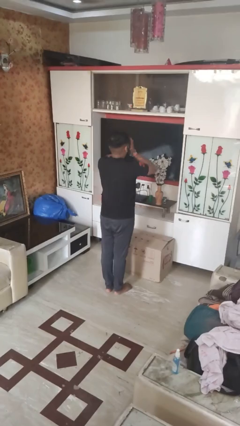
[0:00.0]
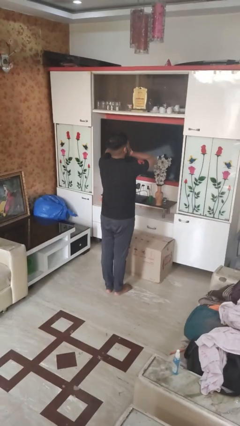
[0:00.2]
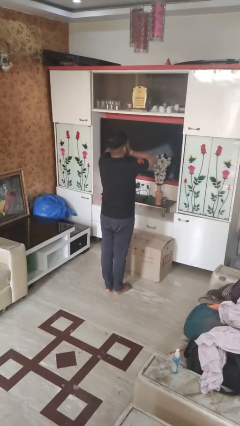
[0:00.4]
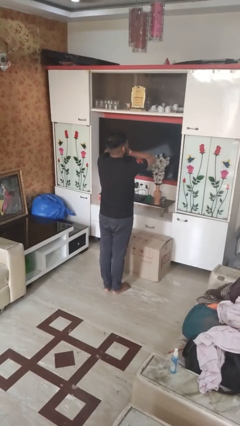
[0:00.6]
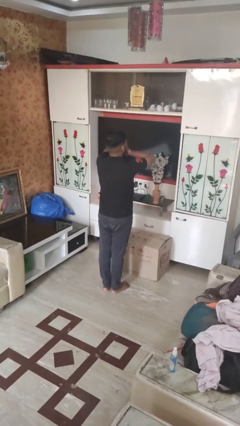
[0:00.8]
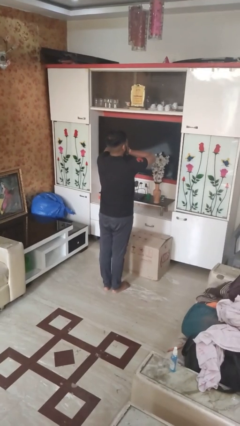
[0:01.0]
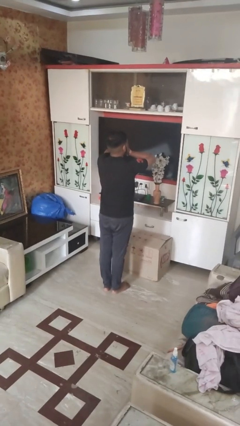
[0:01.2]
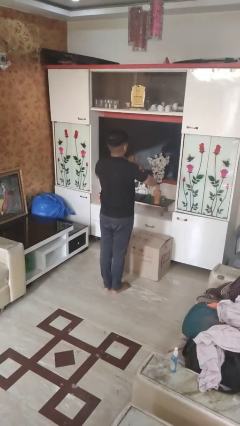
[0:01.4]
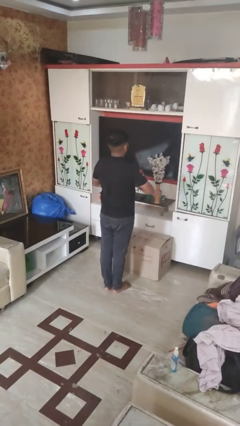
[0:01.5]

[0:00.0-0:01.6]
person covers face with hands

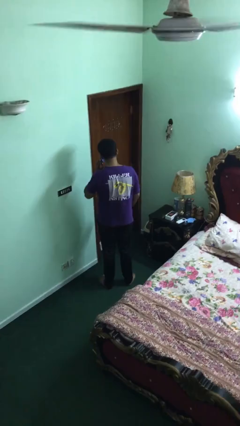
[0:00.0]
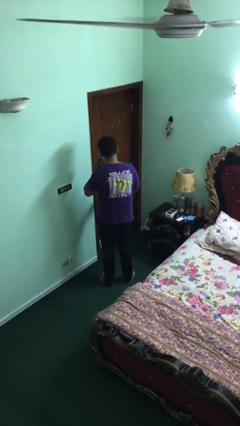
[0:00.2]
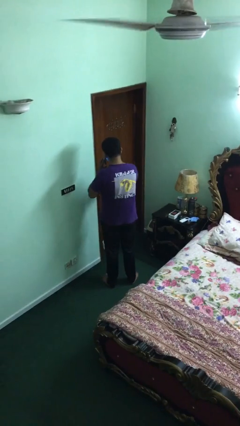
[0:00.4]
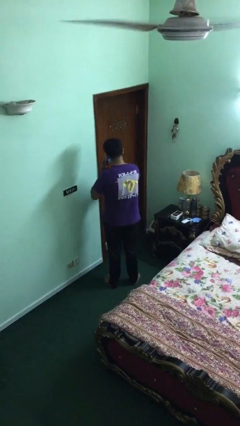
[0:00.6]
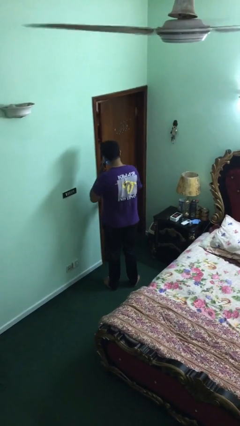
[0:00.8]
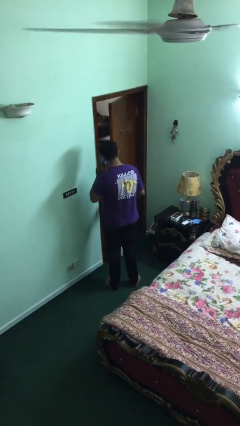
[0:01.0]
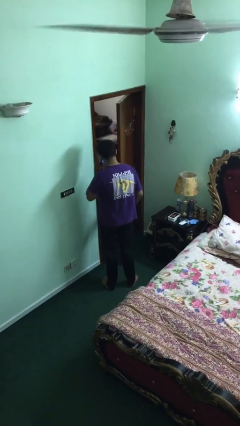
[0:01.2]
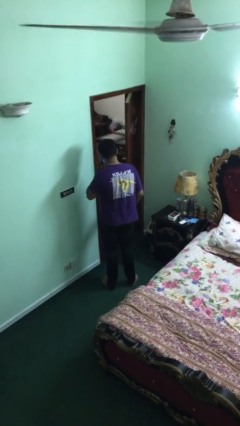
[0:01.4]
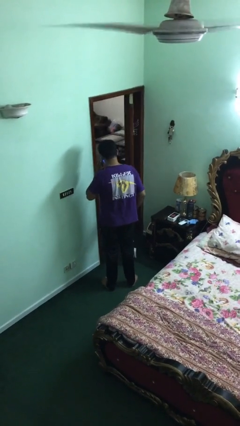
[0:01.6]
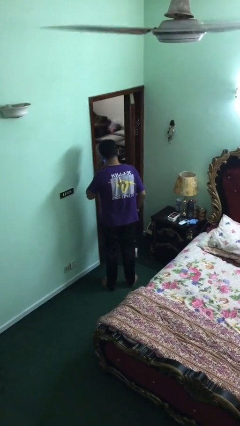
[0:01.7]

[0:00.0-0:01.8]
person opens facility door

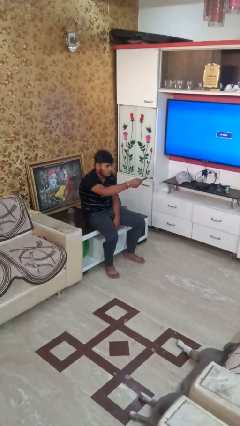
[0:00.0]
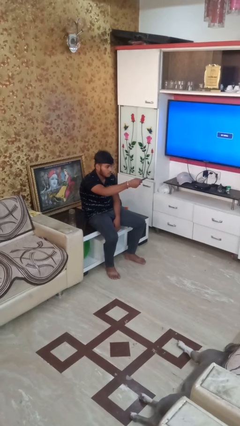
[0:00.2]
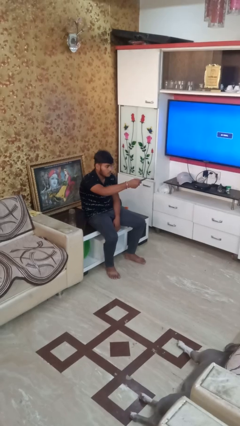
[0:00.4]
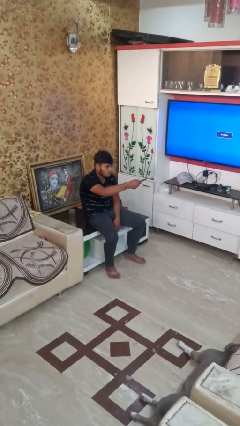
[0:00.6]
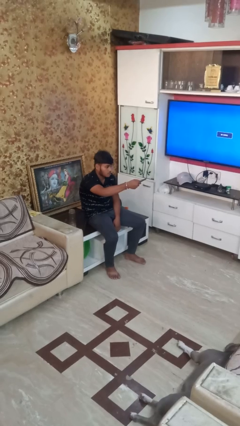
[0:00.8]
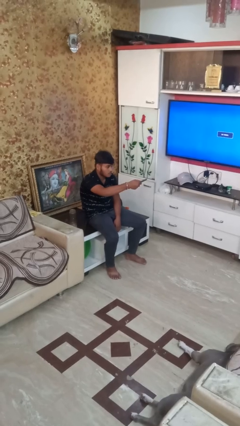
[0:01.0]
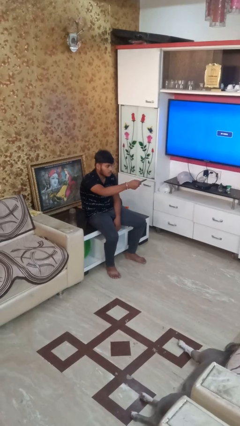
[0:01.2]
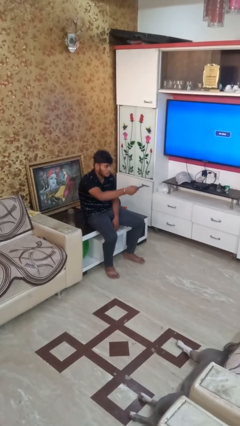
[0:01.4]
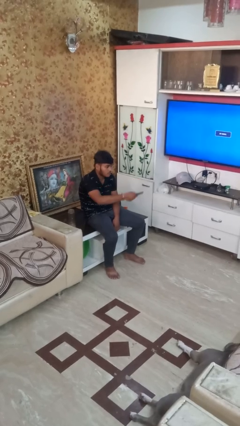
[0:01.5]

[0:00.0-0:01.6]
person uses television remote

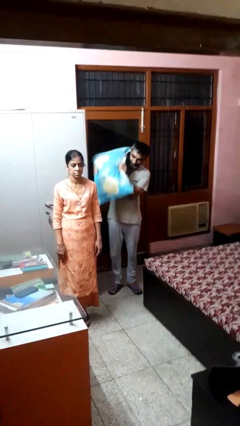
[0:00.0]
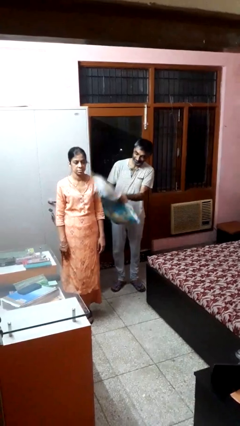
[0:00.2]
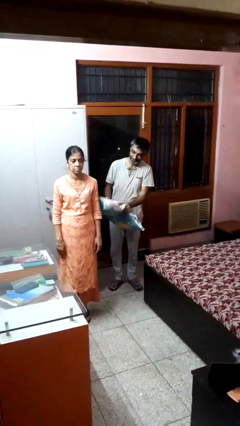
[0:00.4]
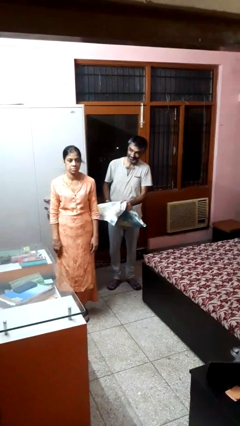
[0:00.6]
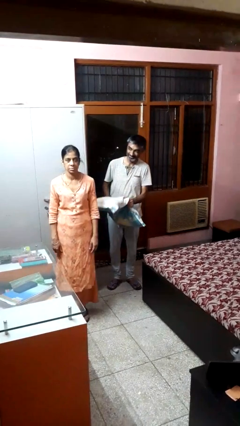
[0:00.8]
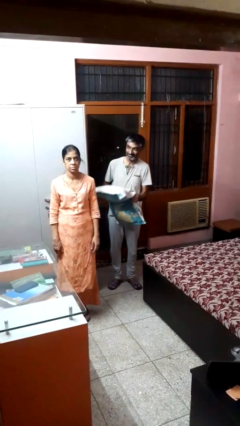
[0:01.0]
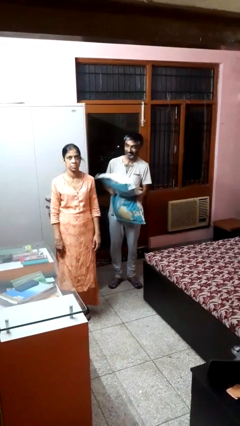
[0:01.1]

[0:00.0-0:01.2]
person hits person with pillow

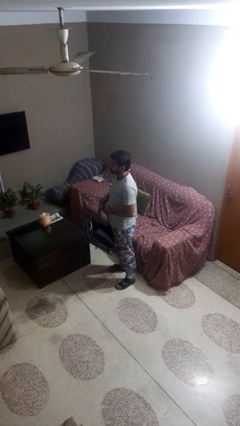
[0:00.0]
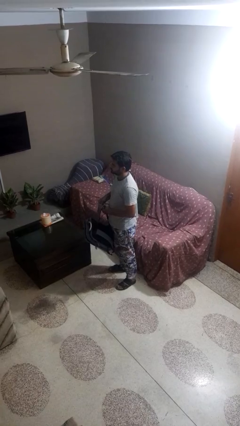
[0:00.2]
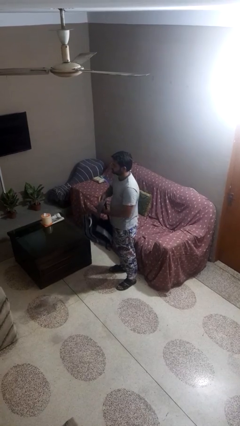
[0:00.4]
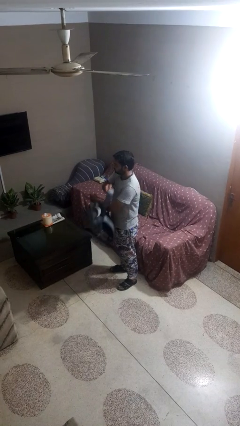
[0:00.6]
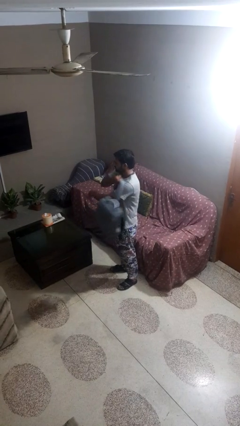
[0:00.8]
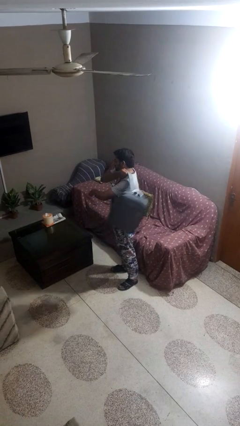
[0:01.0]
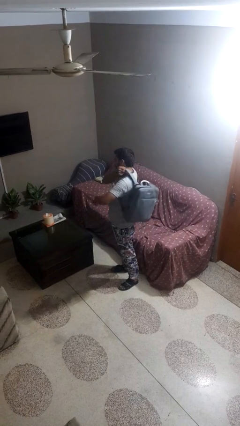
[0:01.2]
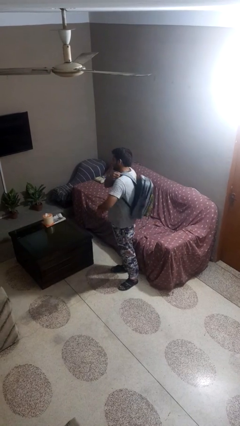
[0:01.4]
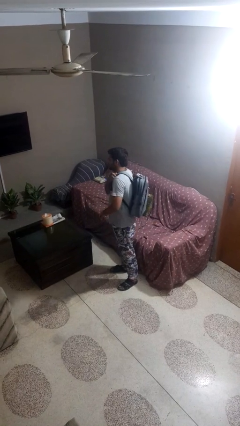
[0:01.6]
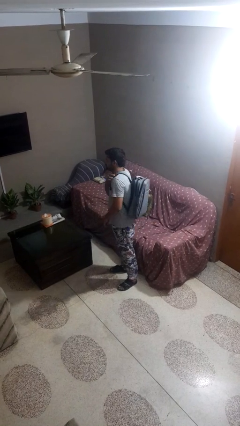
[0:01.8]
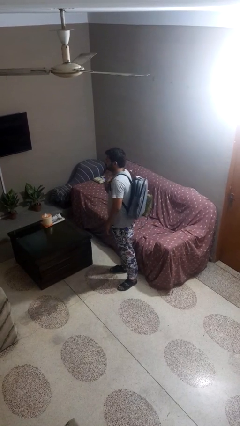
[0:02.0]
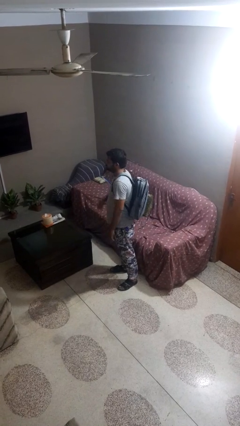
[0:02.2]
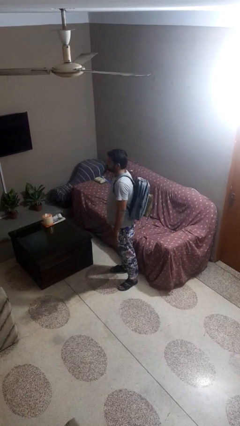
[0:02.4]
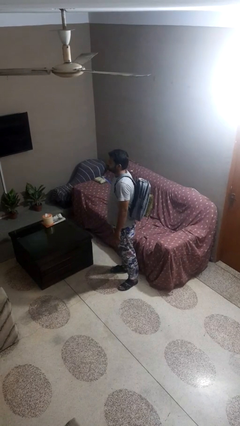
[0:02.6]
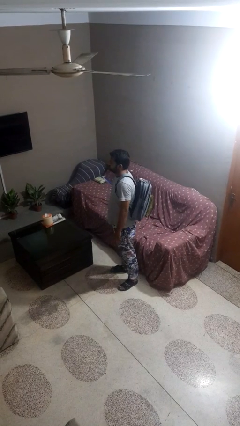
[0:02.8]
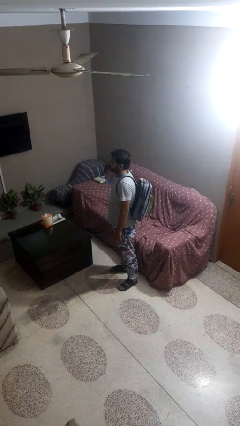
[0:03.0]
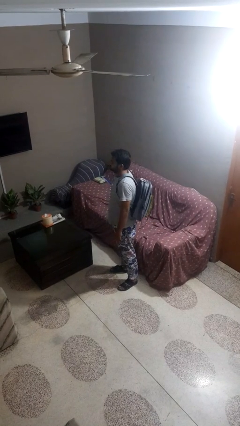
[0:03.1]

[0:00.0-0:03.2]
person puts on backpack

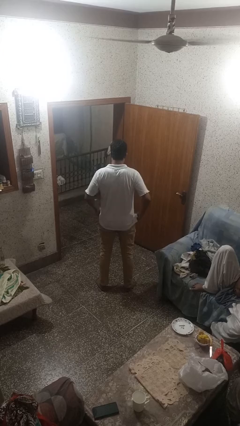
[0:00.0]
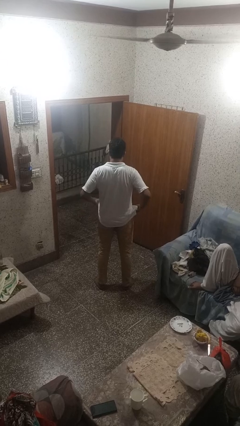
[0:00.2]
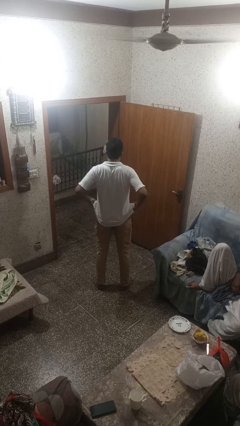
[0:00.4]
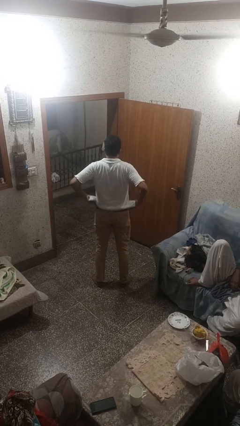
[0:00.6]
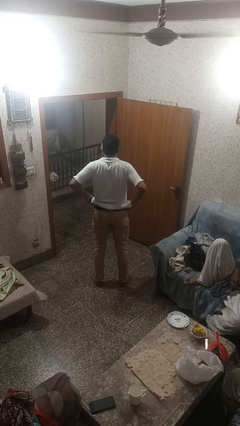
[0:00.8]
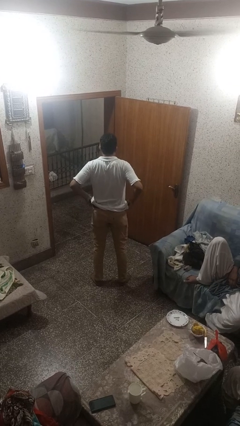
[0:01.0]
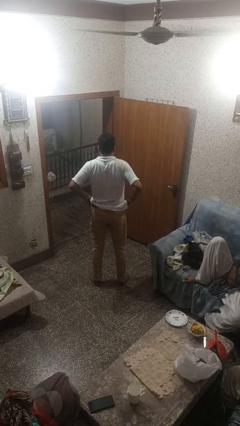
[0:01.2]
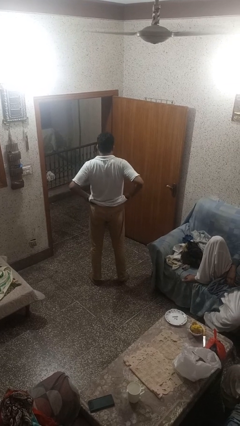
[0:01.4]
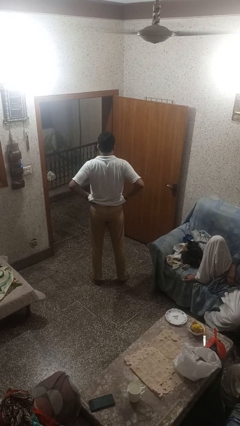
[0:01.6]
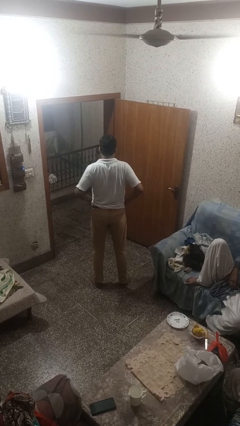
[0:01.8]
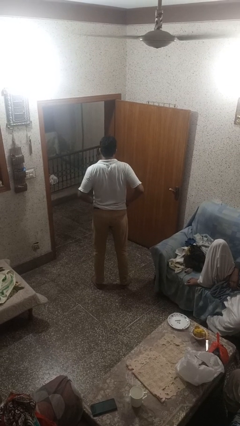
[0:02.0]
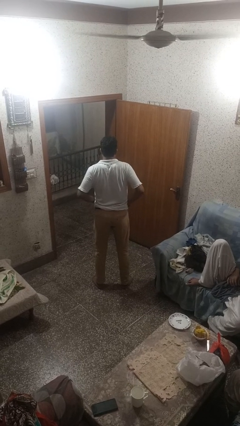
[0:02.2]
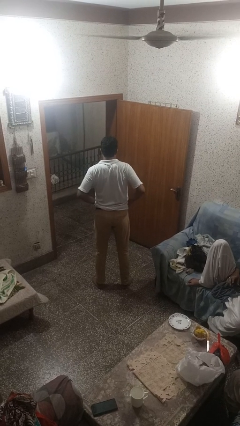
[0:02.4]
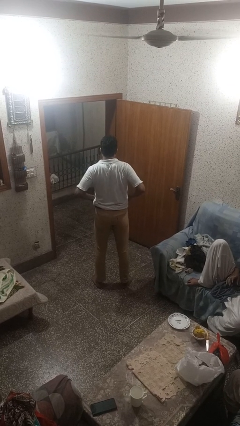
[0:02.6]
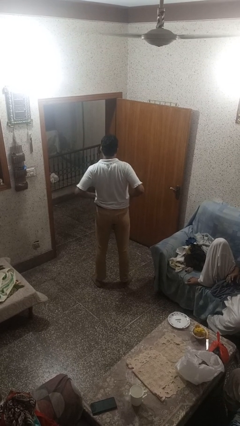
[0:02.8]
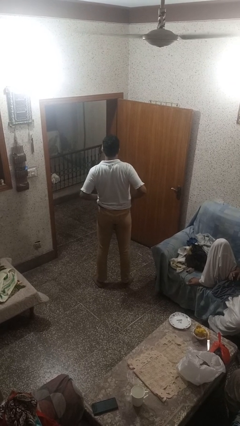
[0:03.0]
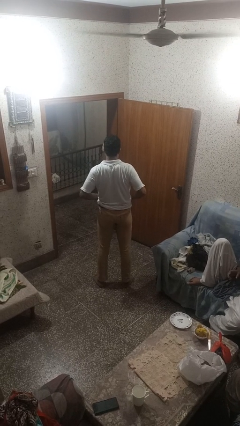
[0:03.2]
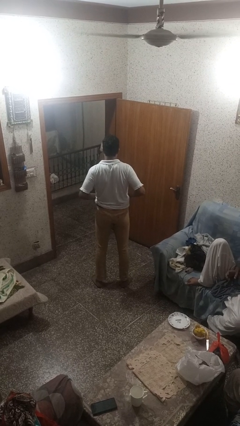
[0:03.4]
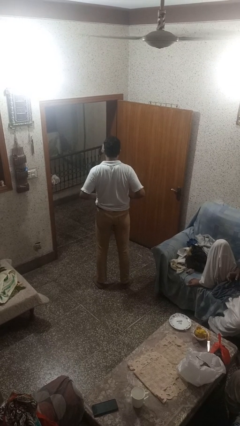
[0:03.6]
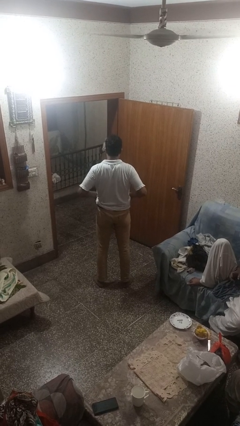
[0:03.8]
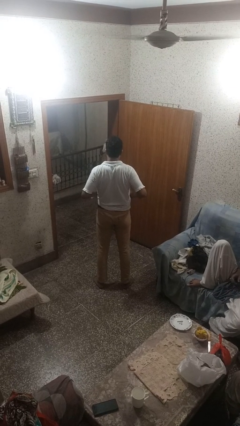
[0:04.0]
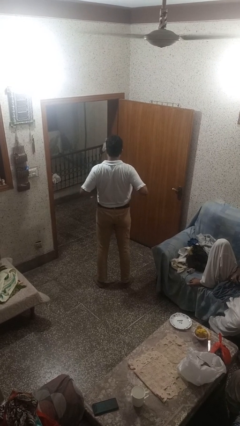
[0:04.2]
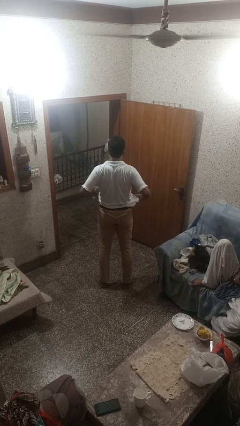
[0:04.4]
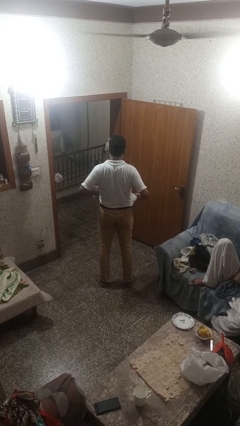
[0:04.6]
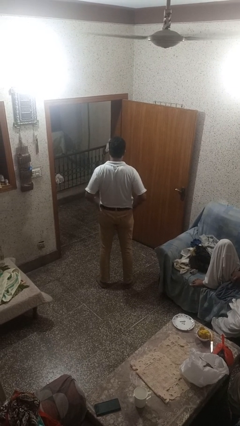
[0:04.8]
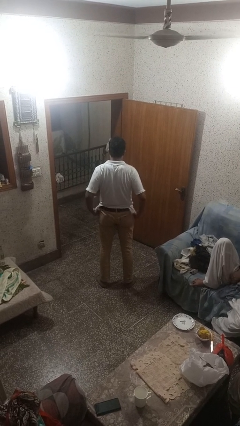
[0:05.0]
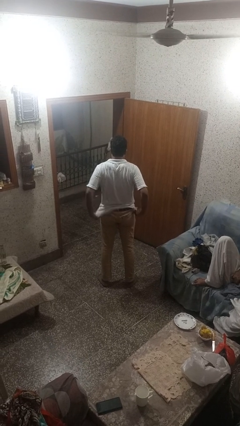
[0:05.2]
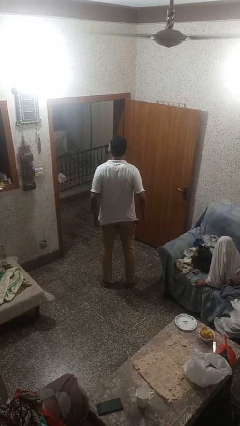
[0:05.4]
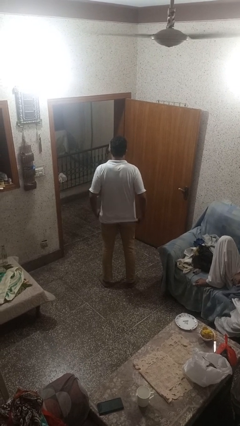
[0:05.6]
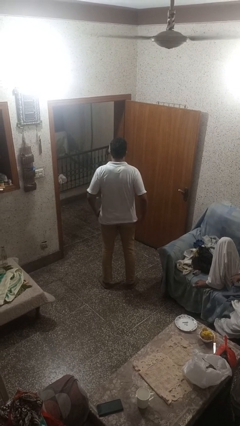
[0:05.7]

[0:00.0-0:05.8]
person hikes up pants

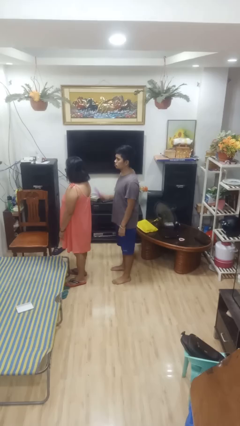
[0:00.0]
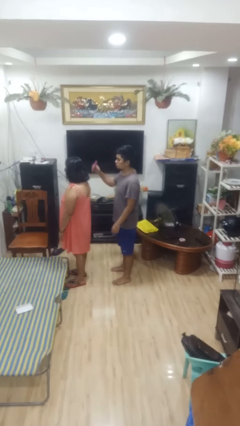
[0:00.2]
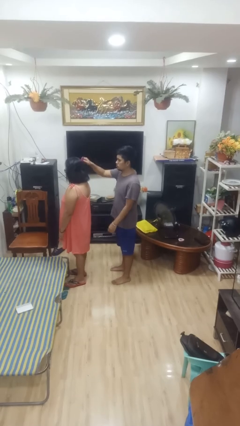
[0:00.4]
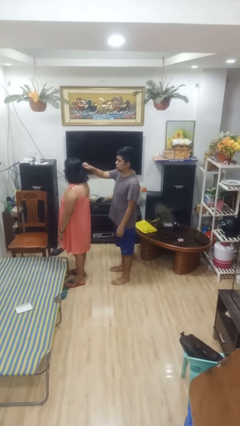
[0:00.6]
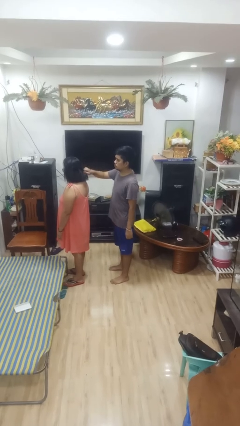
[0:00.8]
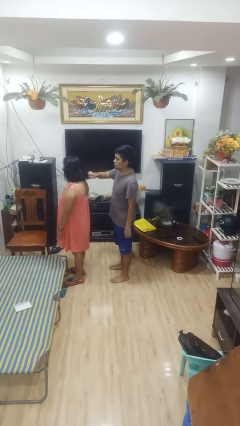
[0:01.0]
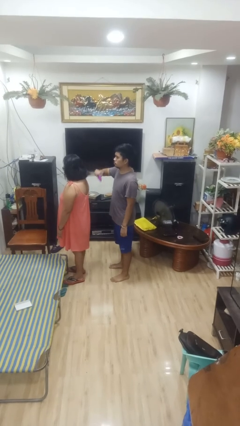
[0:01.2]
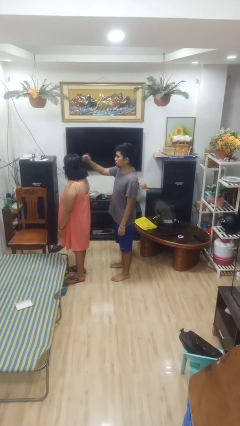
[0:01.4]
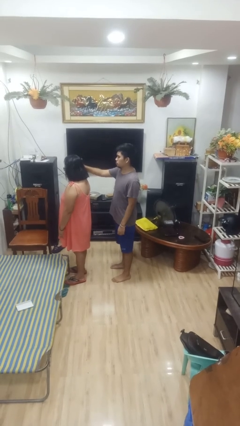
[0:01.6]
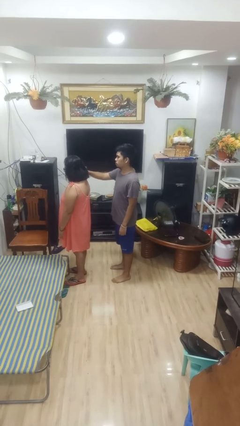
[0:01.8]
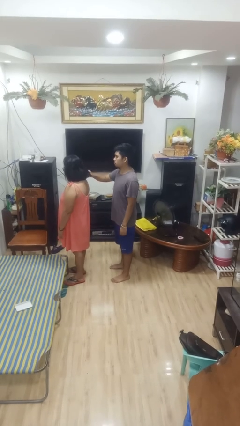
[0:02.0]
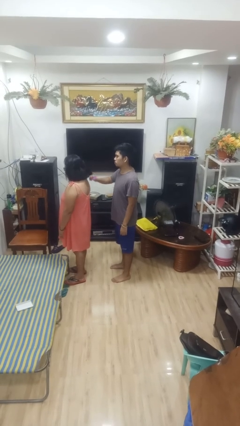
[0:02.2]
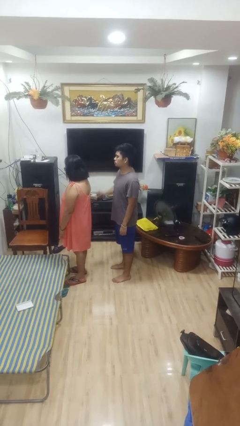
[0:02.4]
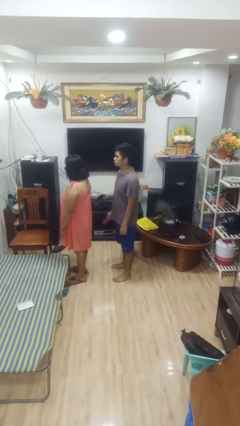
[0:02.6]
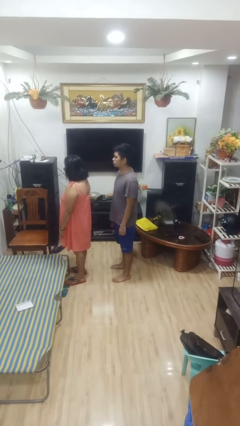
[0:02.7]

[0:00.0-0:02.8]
person brushes hair of person
